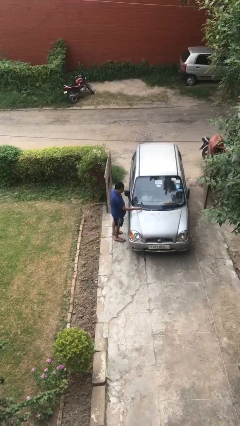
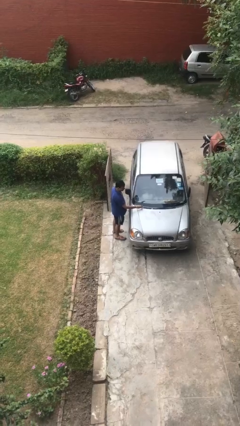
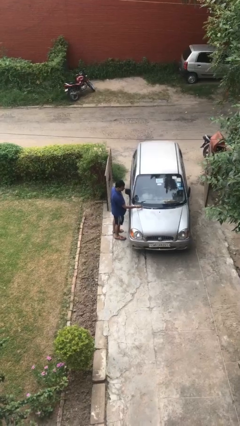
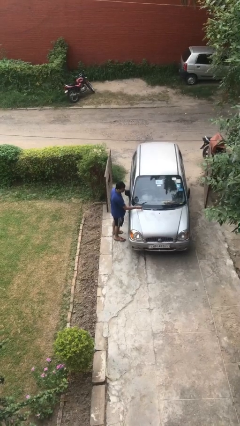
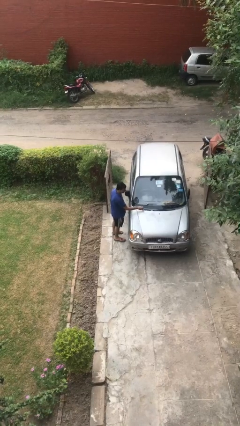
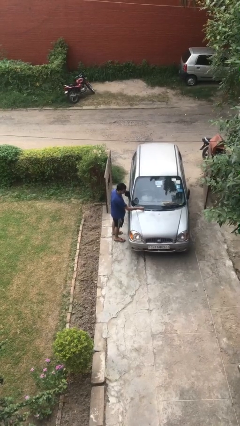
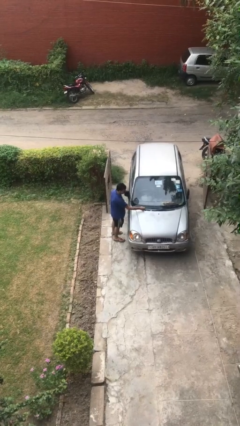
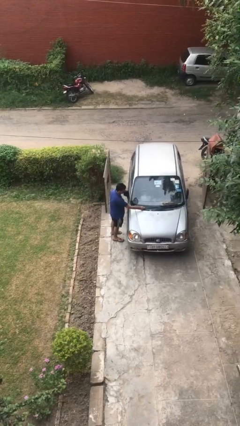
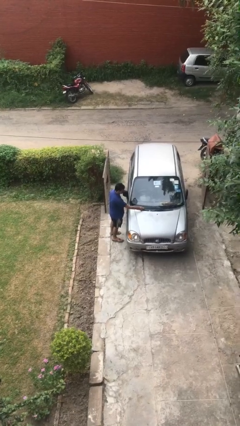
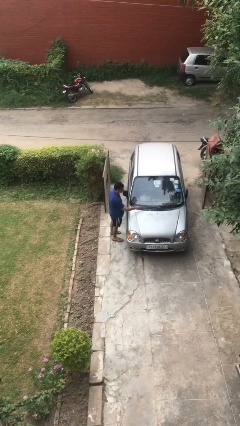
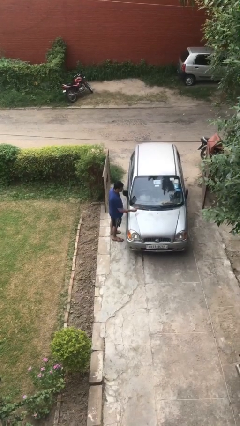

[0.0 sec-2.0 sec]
person flips down car wipers

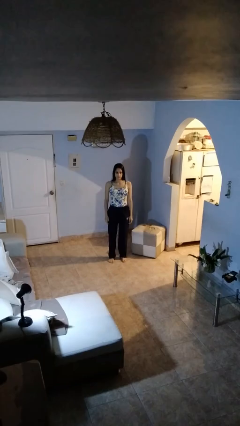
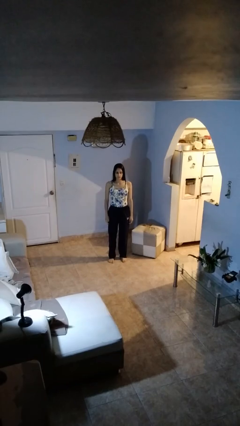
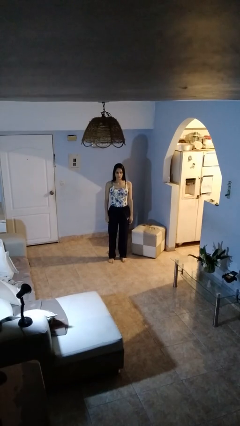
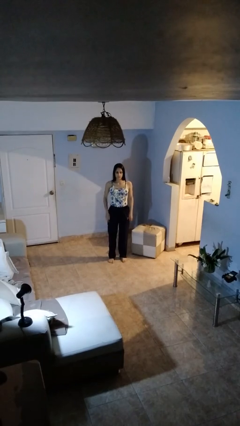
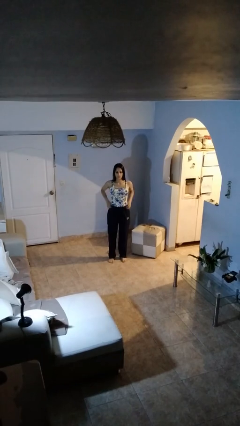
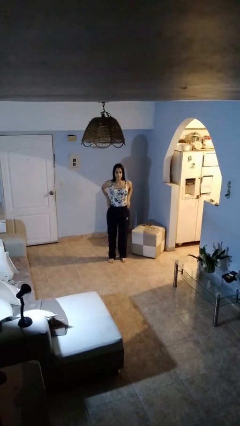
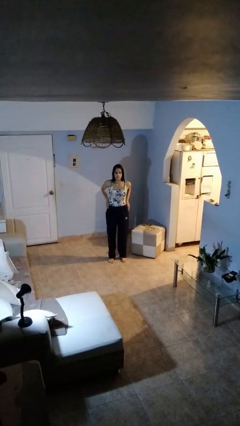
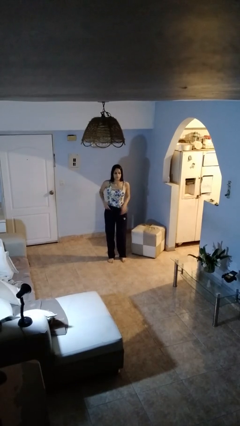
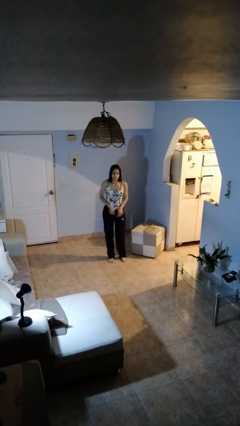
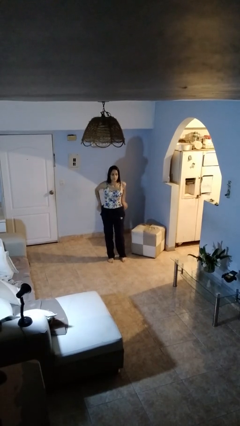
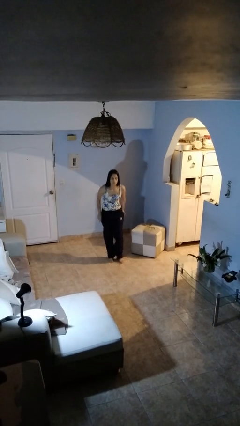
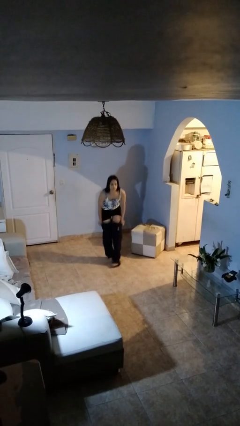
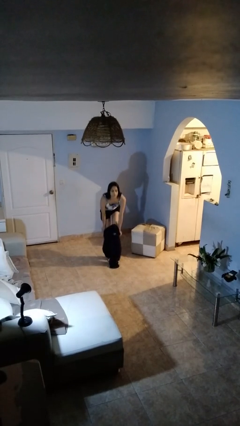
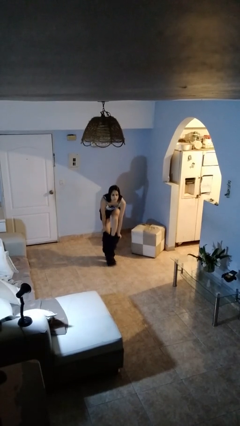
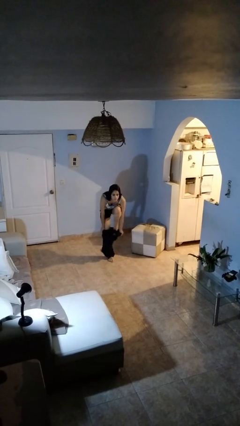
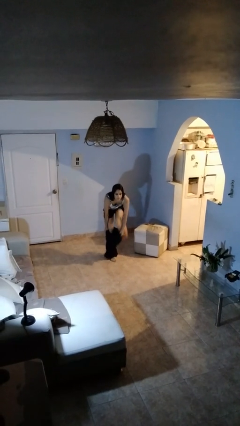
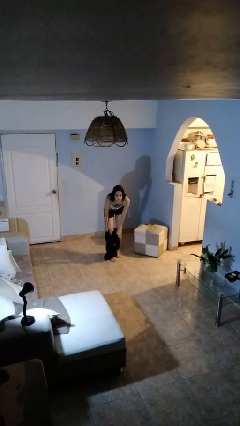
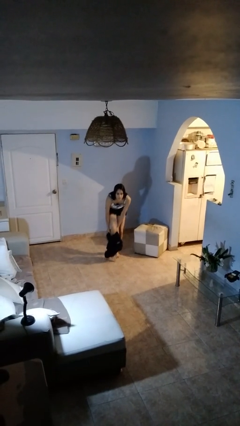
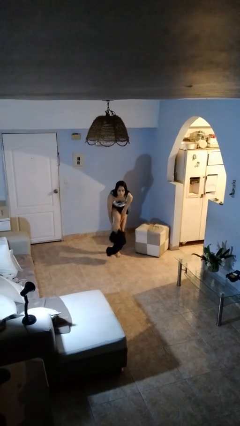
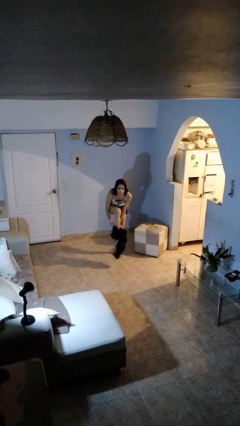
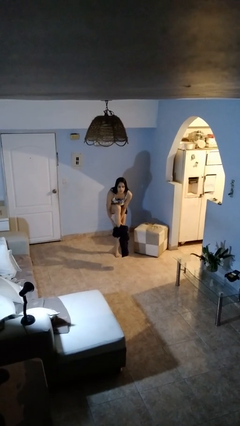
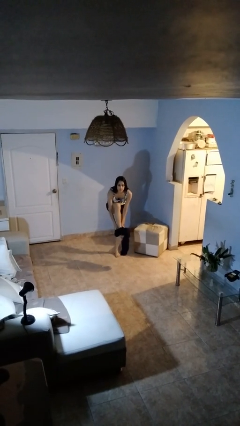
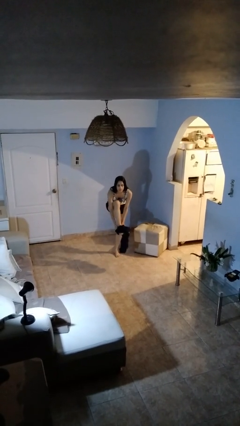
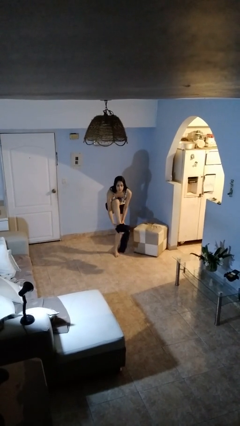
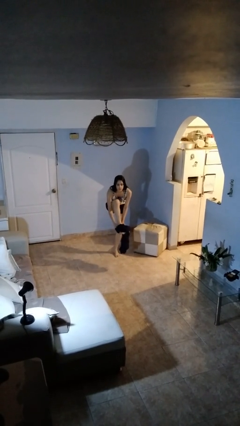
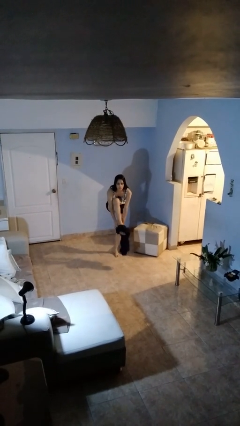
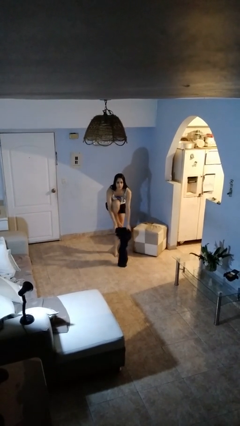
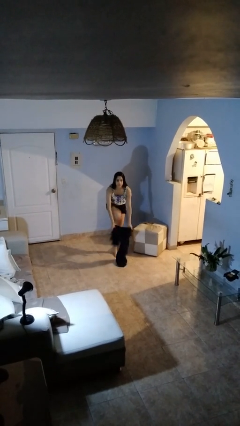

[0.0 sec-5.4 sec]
person puts on pants

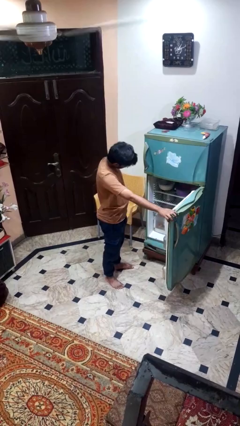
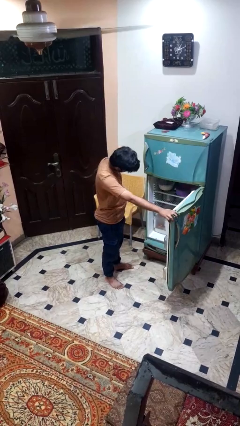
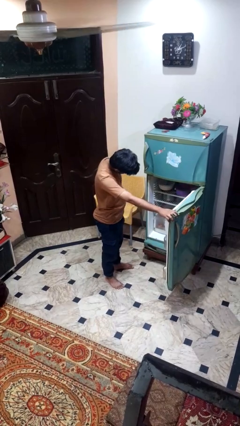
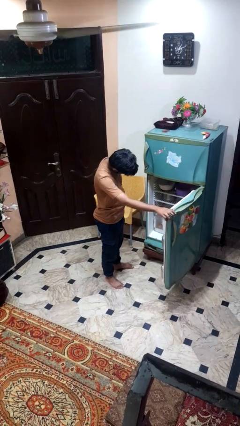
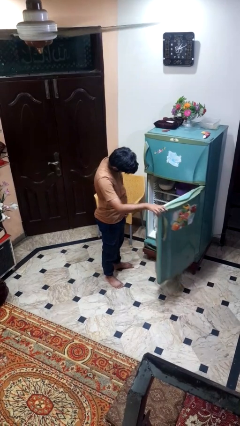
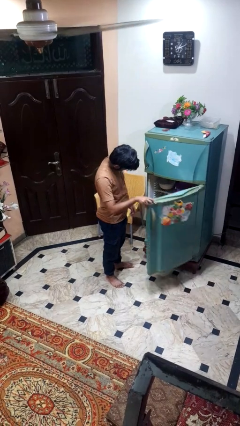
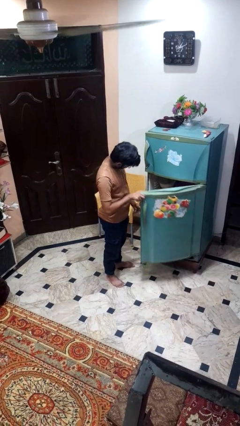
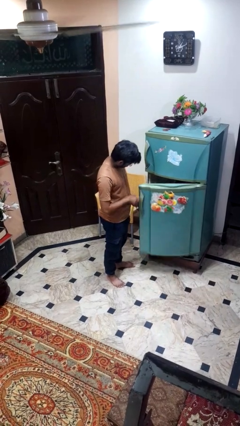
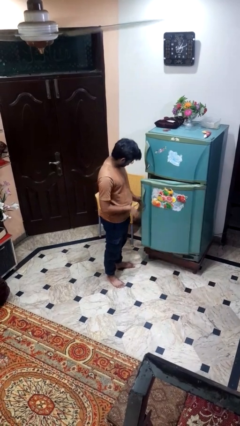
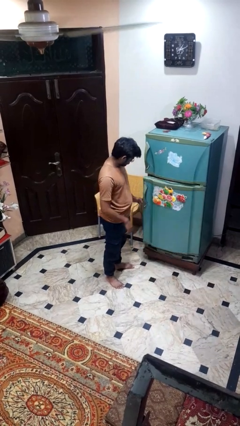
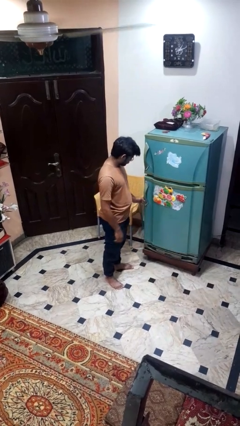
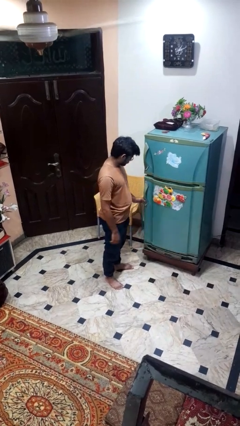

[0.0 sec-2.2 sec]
person closes refrigerator

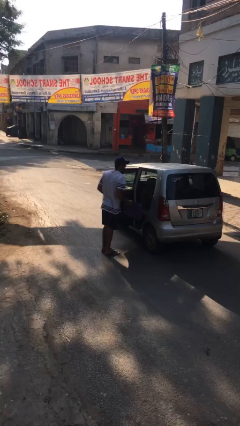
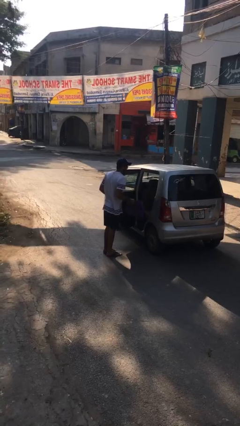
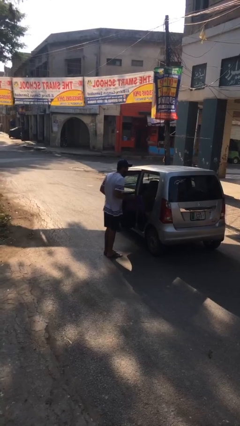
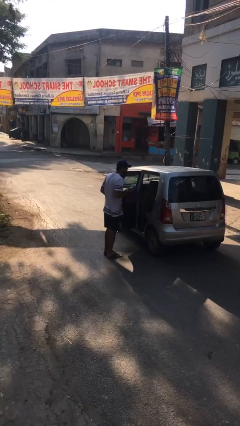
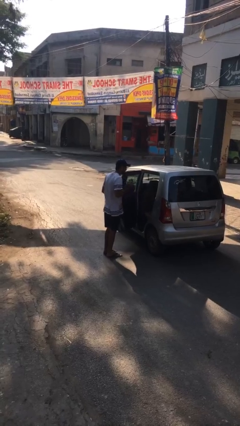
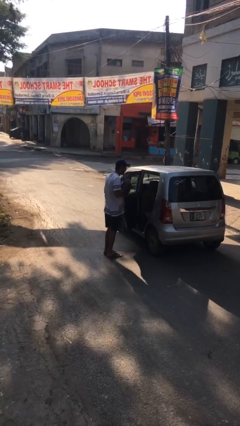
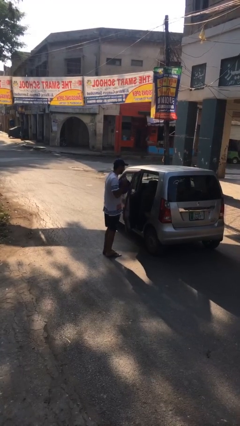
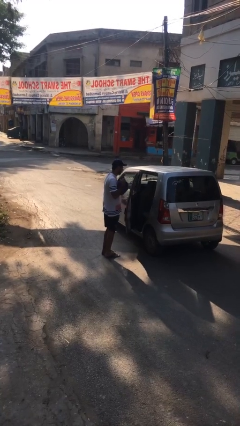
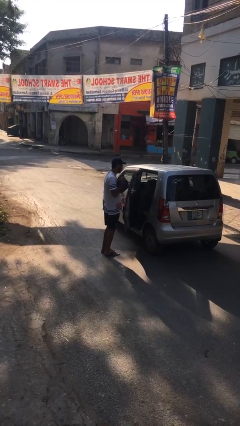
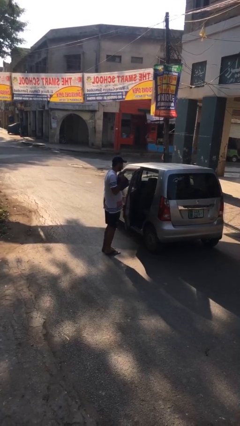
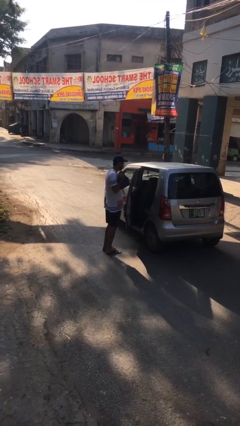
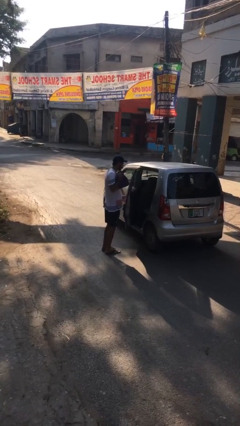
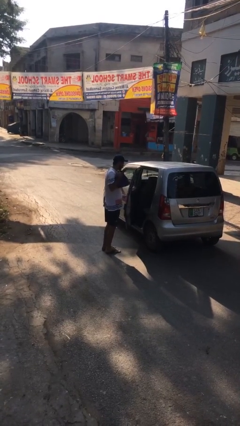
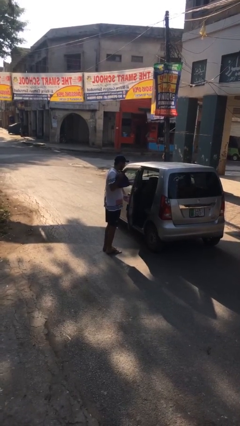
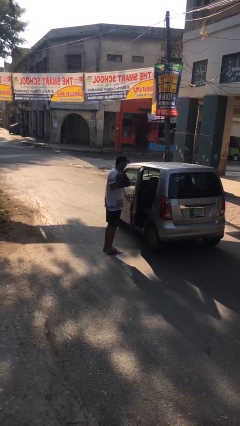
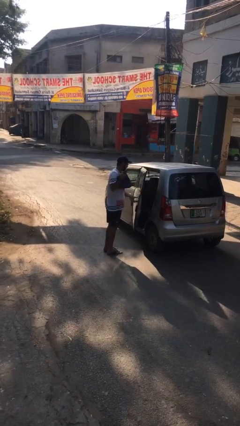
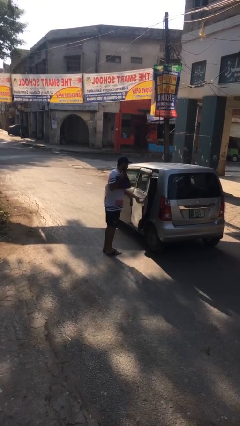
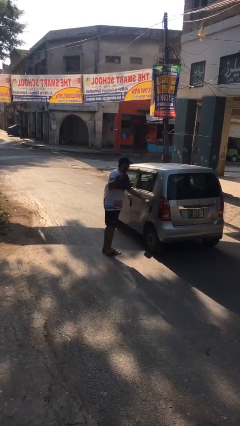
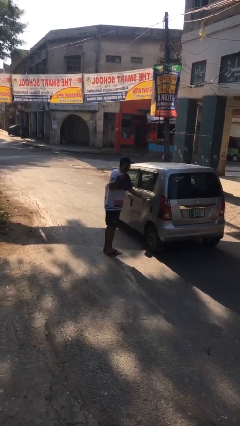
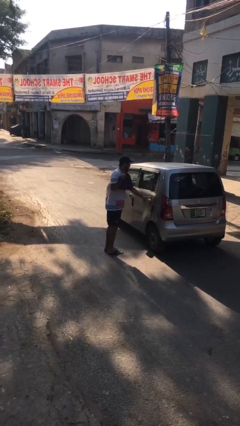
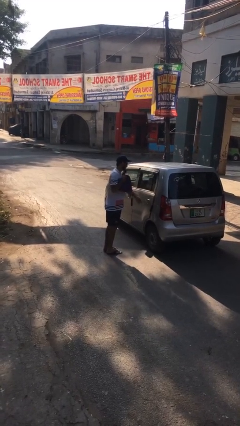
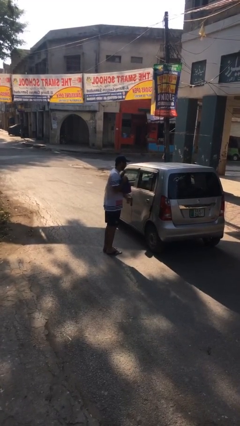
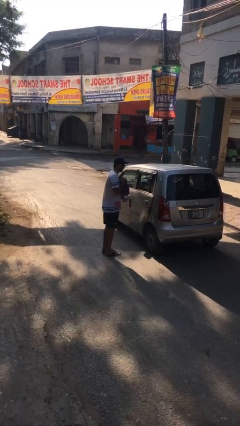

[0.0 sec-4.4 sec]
person closes car door

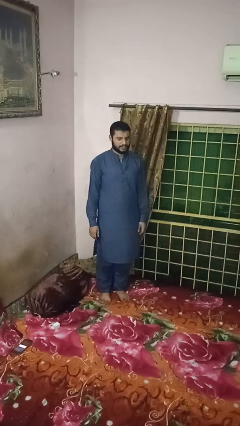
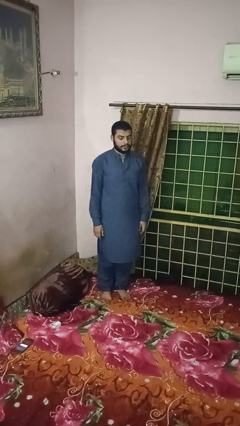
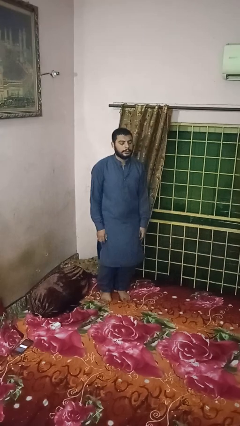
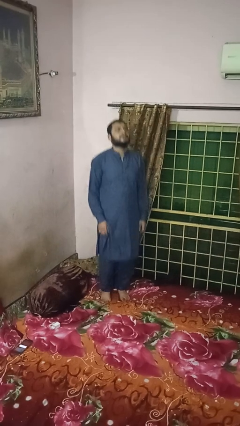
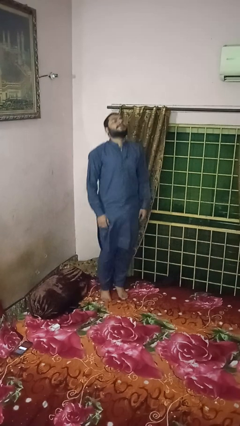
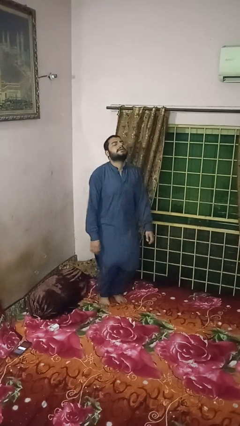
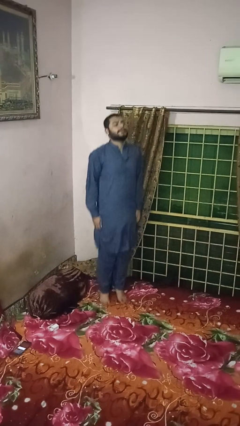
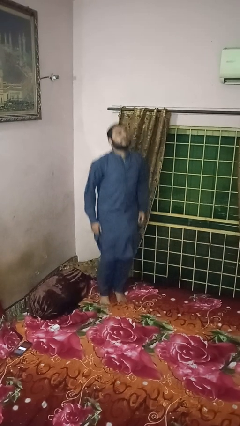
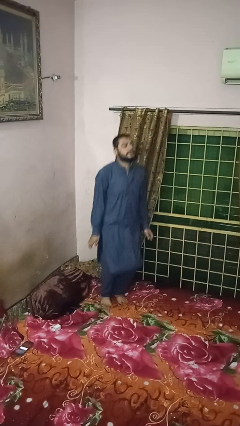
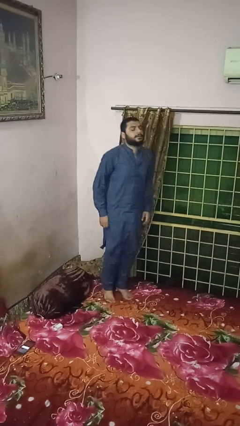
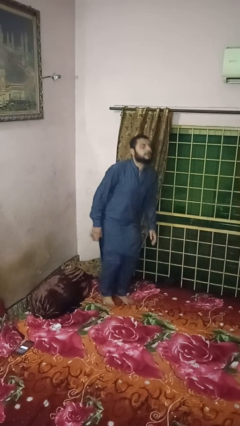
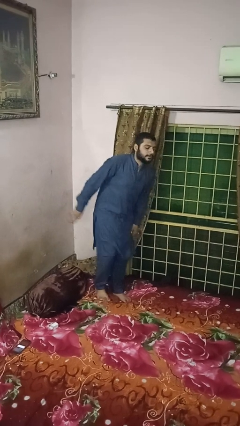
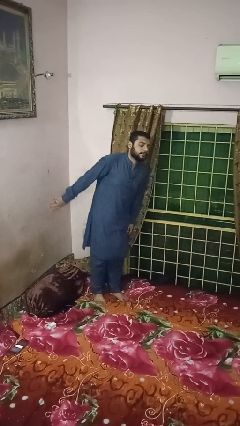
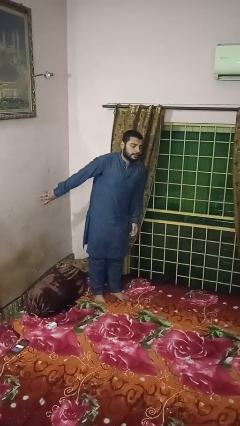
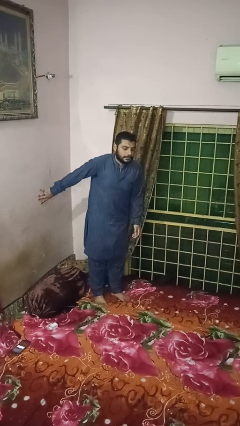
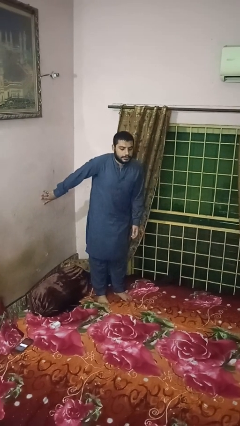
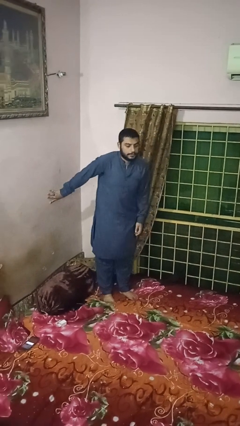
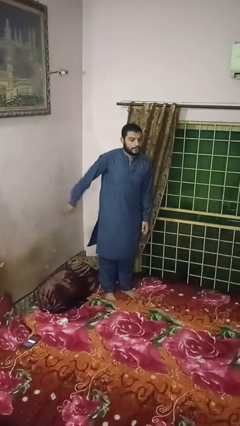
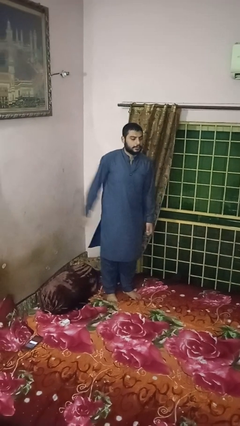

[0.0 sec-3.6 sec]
person jumps on bed
